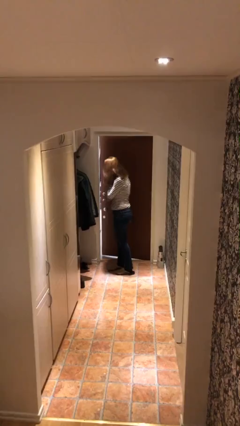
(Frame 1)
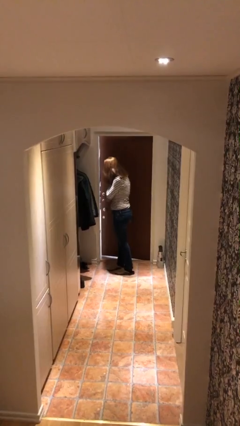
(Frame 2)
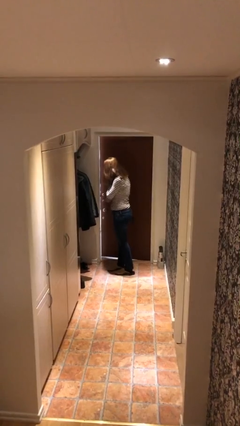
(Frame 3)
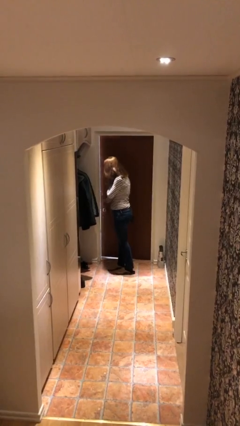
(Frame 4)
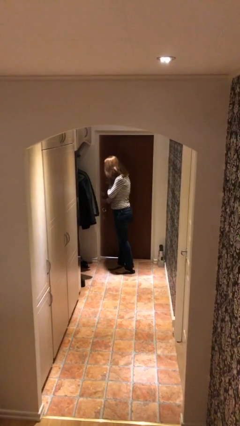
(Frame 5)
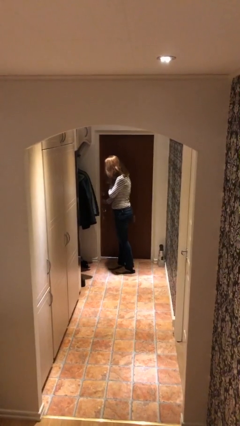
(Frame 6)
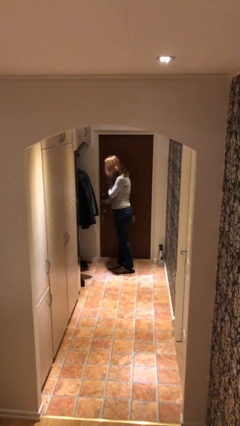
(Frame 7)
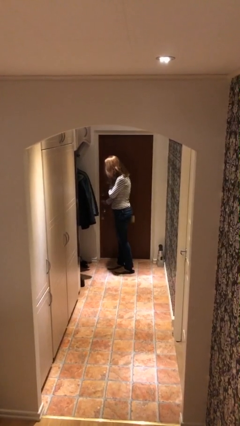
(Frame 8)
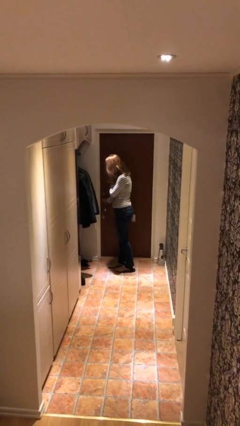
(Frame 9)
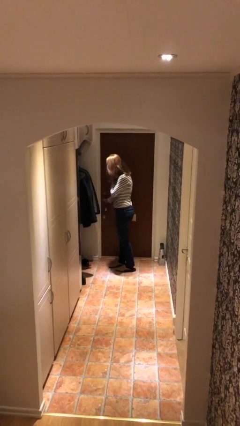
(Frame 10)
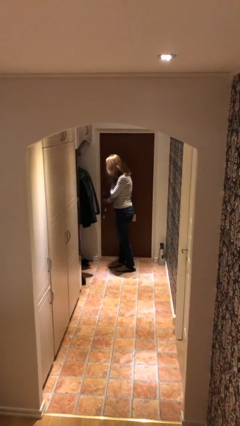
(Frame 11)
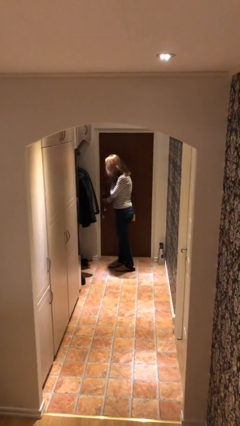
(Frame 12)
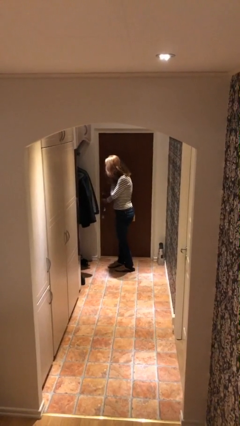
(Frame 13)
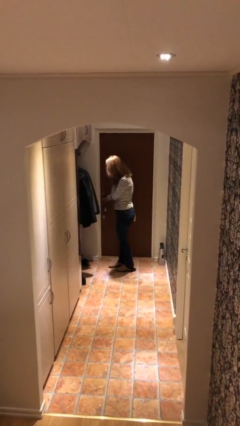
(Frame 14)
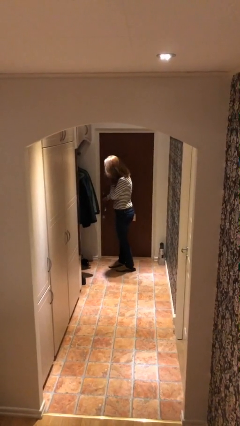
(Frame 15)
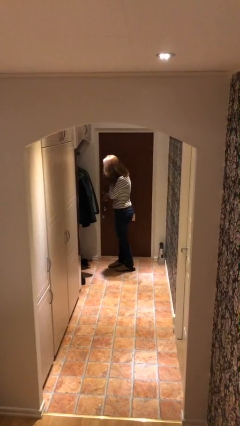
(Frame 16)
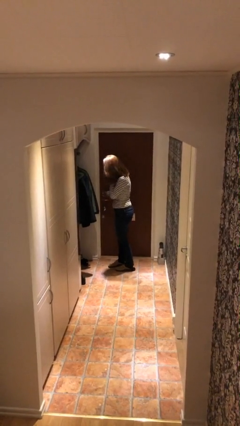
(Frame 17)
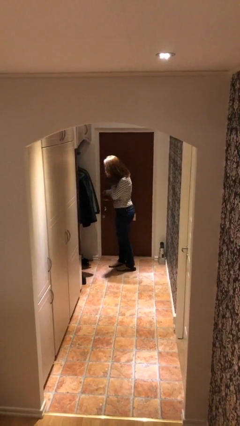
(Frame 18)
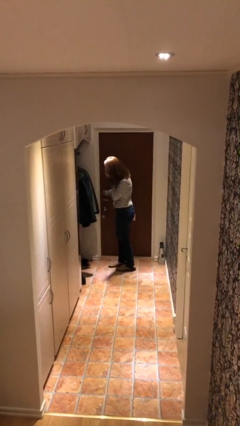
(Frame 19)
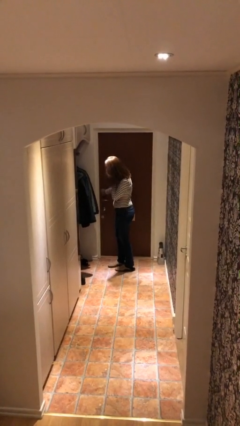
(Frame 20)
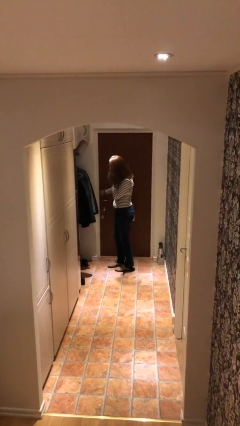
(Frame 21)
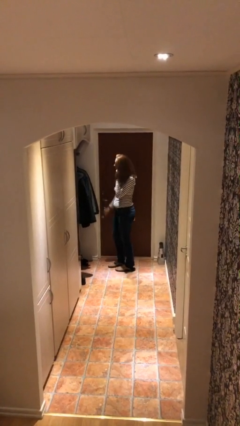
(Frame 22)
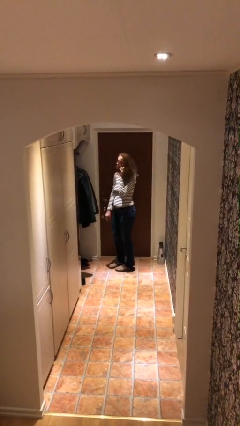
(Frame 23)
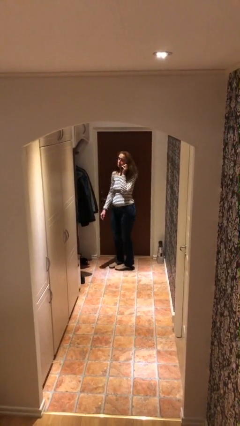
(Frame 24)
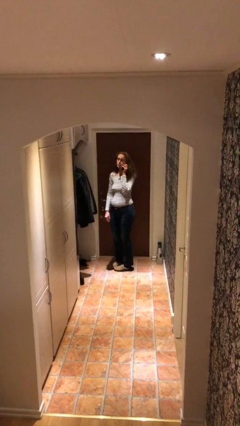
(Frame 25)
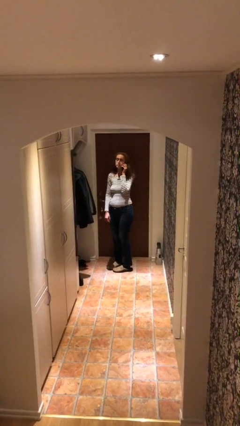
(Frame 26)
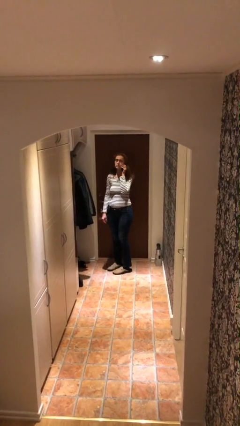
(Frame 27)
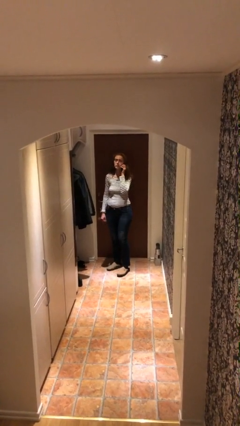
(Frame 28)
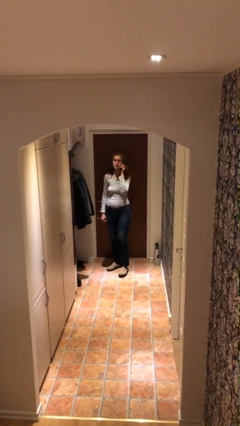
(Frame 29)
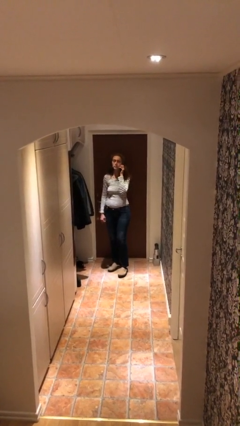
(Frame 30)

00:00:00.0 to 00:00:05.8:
person closes facility door

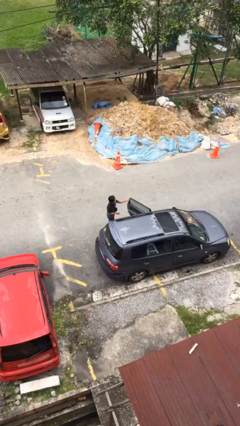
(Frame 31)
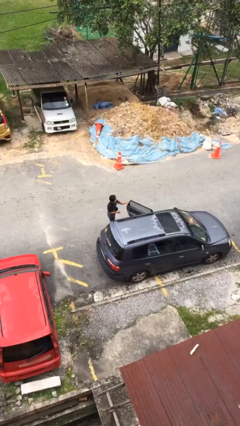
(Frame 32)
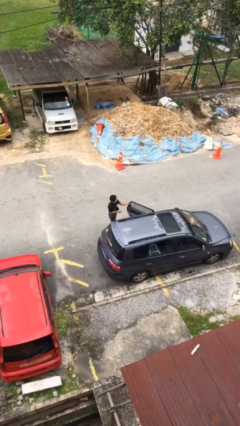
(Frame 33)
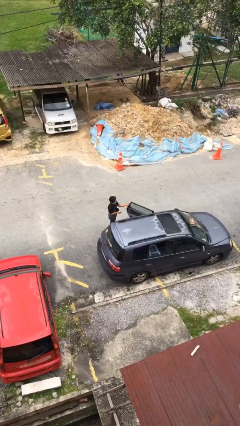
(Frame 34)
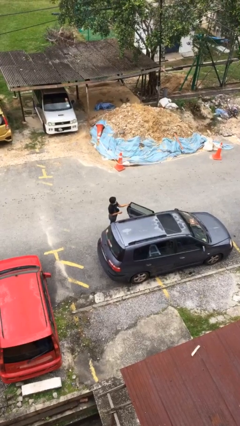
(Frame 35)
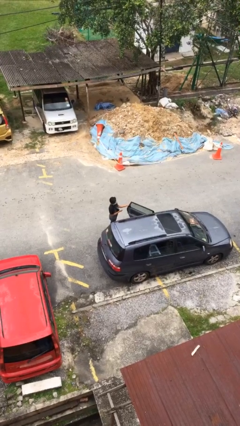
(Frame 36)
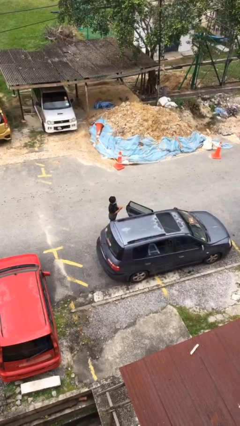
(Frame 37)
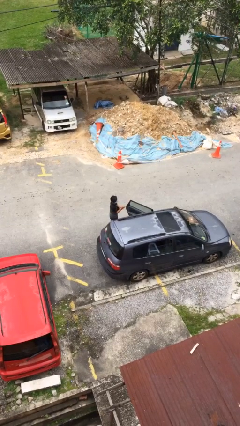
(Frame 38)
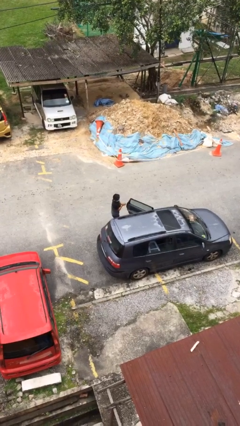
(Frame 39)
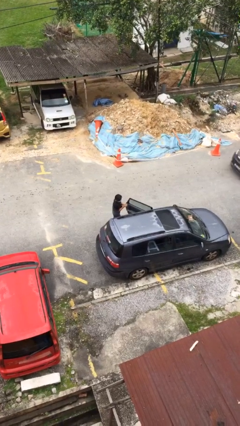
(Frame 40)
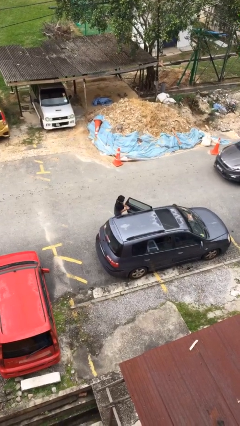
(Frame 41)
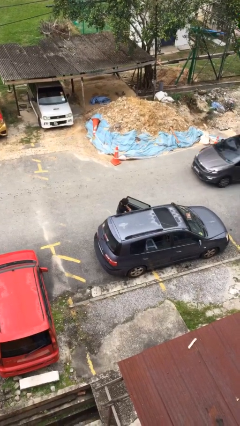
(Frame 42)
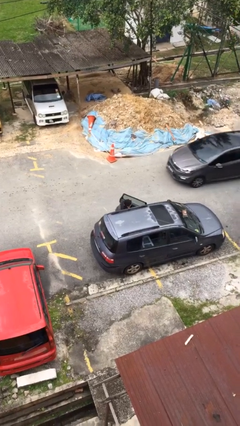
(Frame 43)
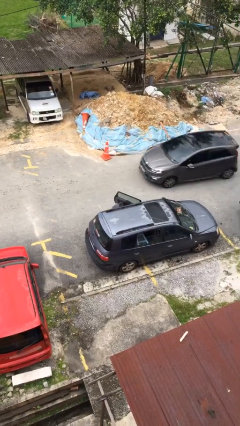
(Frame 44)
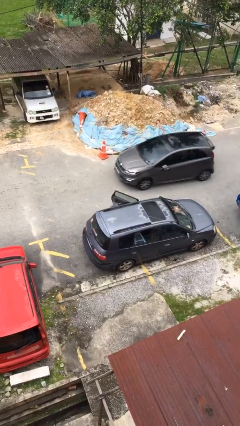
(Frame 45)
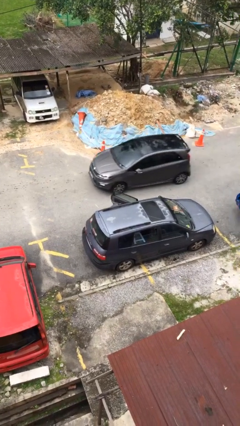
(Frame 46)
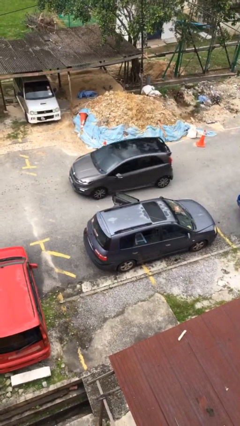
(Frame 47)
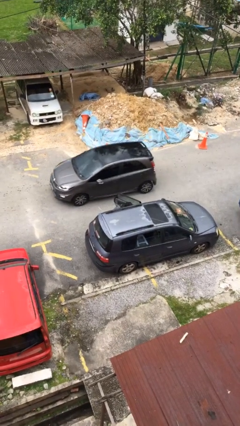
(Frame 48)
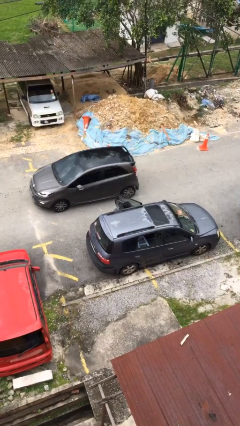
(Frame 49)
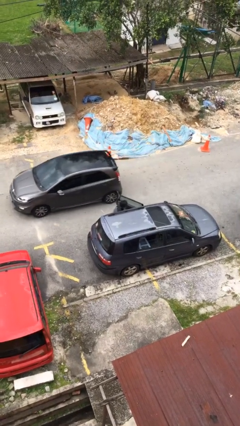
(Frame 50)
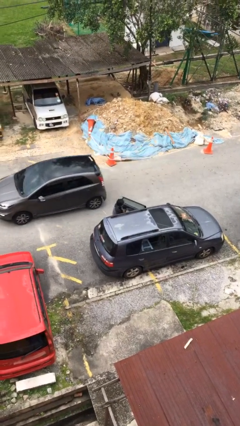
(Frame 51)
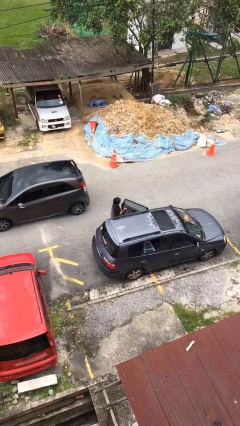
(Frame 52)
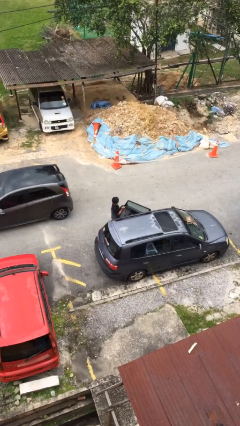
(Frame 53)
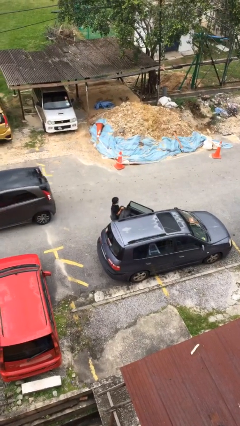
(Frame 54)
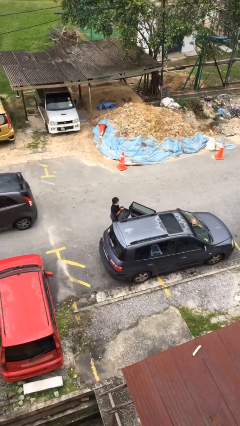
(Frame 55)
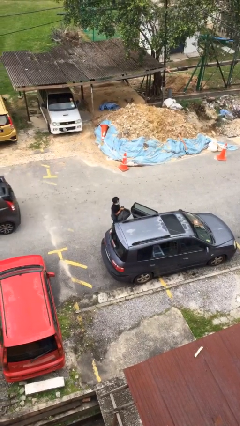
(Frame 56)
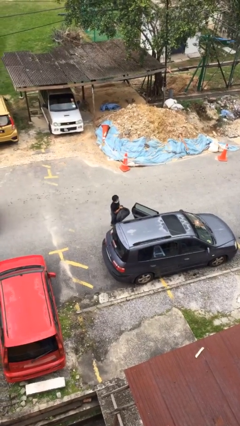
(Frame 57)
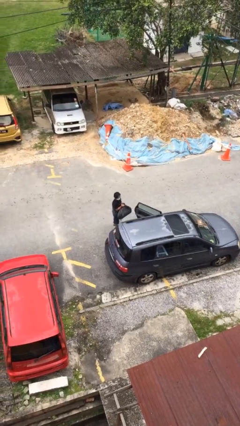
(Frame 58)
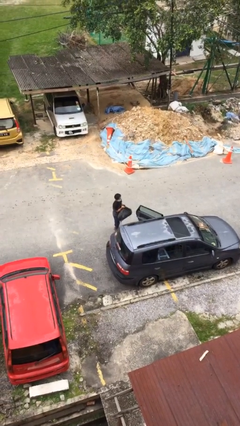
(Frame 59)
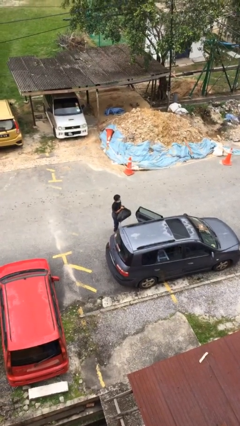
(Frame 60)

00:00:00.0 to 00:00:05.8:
person unloads car

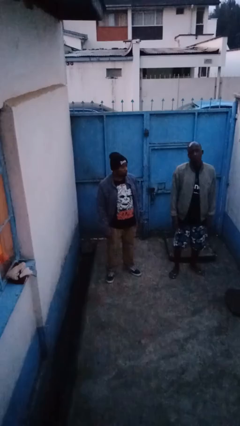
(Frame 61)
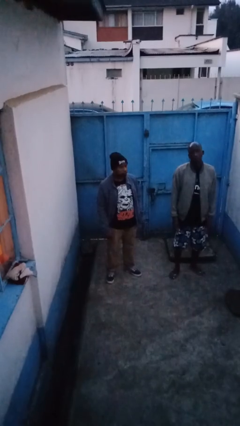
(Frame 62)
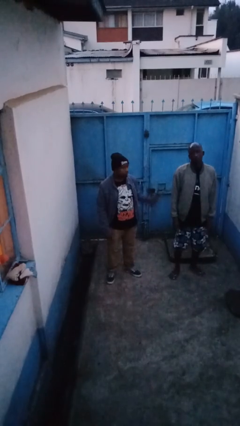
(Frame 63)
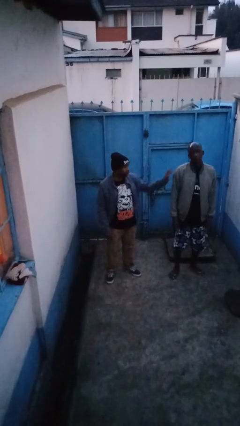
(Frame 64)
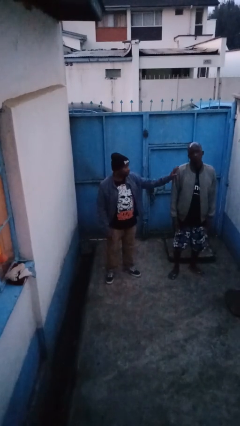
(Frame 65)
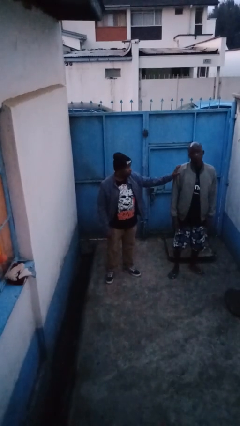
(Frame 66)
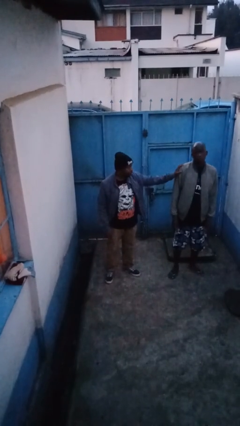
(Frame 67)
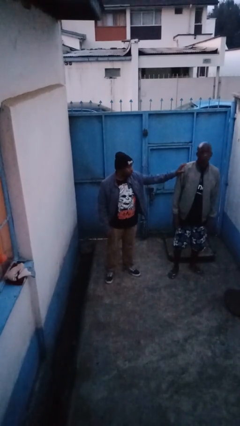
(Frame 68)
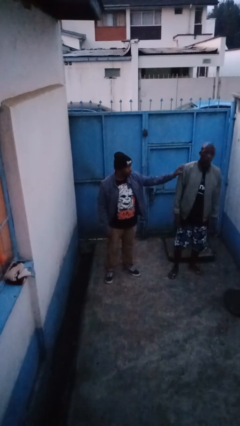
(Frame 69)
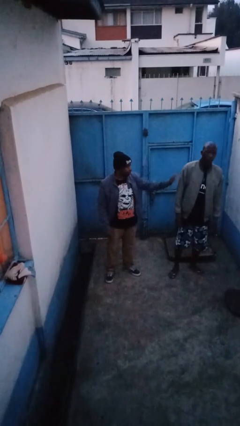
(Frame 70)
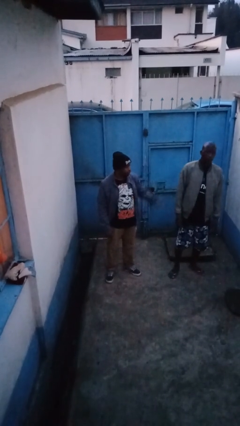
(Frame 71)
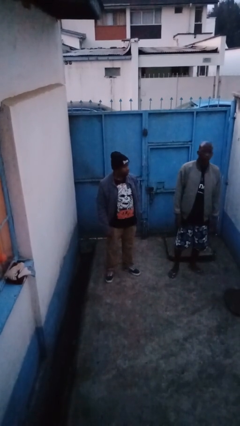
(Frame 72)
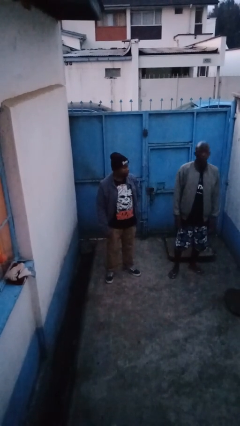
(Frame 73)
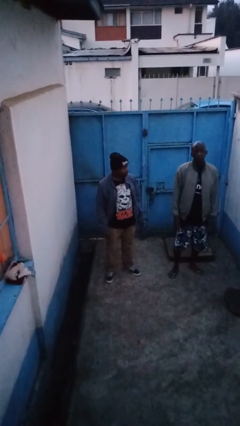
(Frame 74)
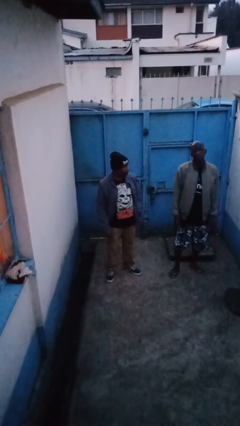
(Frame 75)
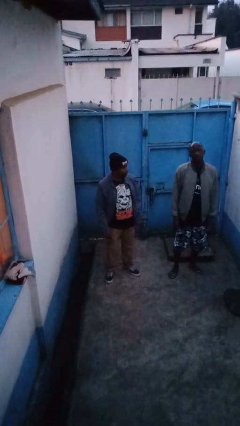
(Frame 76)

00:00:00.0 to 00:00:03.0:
person shoves person

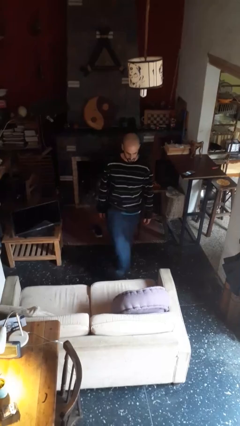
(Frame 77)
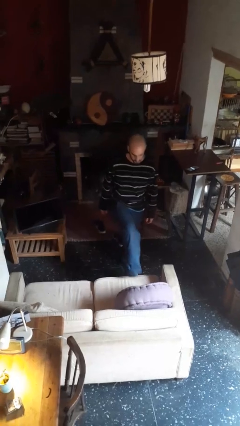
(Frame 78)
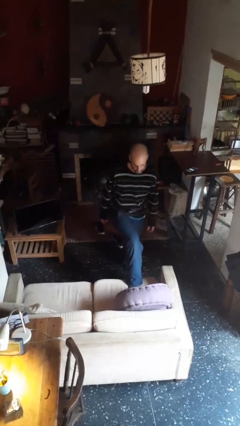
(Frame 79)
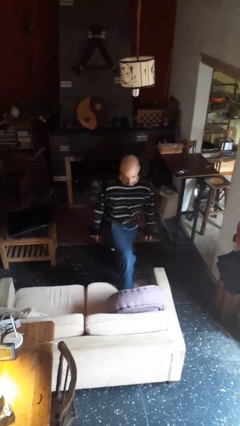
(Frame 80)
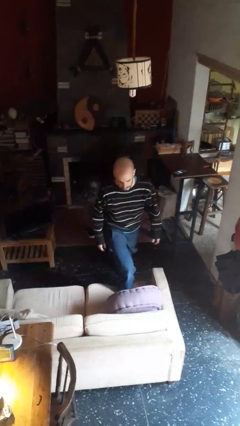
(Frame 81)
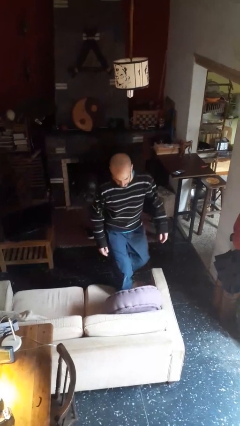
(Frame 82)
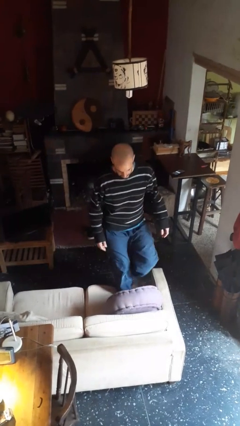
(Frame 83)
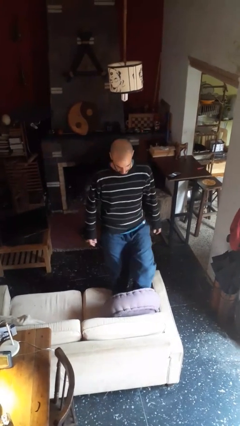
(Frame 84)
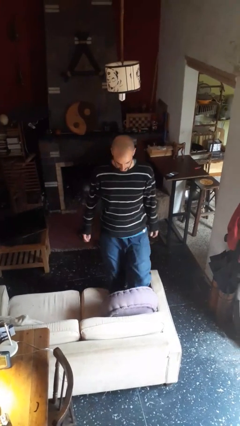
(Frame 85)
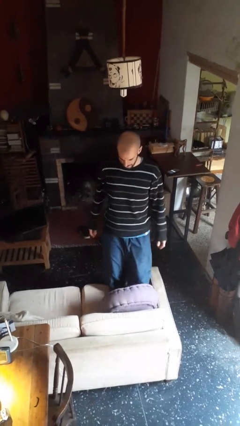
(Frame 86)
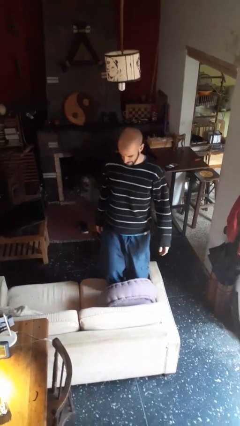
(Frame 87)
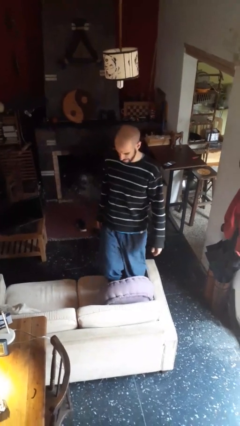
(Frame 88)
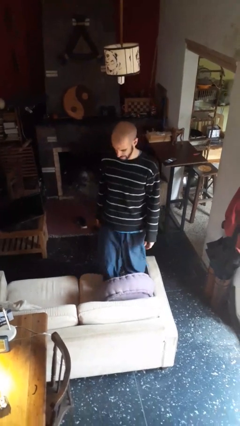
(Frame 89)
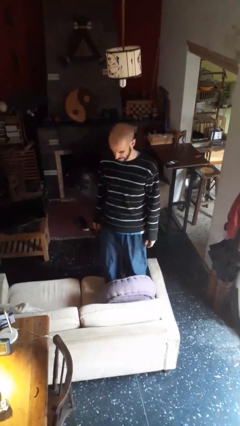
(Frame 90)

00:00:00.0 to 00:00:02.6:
person climbs on couch

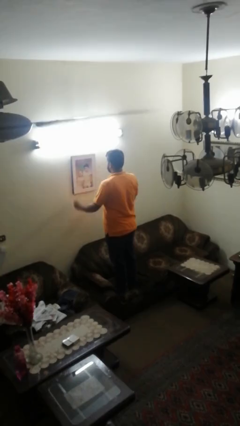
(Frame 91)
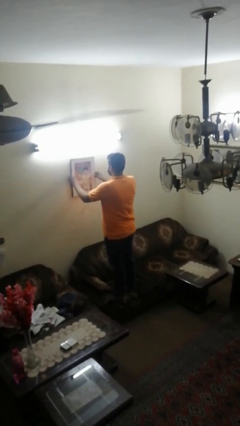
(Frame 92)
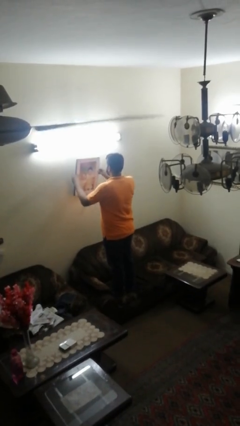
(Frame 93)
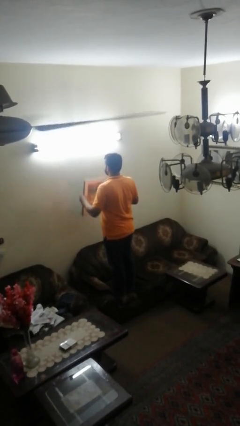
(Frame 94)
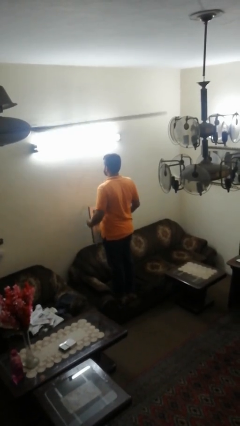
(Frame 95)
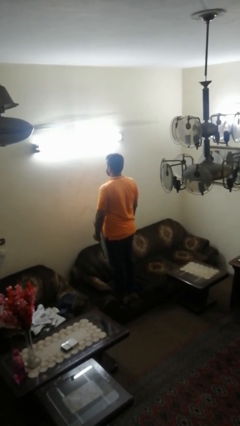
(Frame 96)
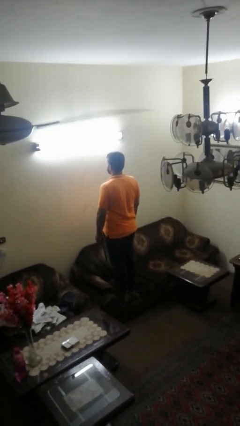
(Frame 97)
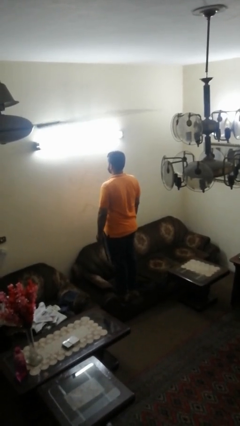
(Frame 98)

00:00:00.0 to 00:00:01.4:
person takes down picture frame
